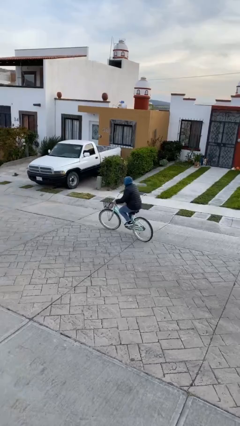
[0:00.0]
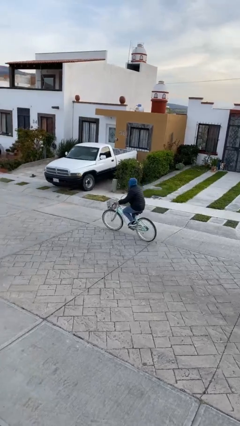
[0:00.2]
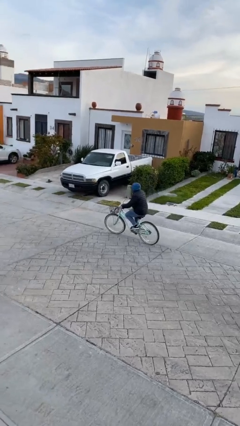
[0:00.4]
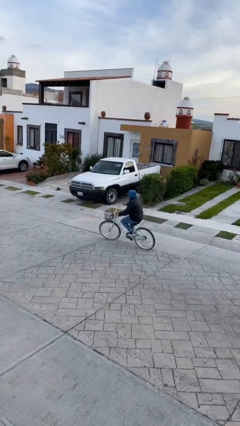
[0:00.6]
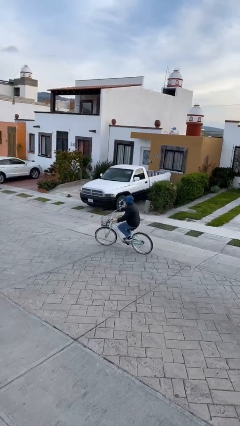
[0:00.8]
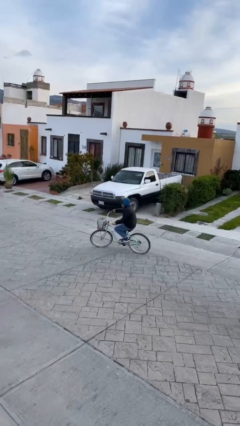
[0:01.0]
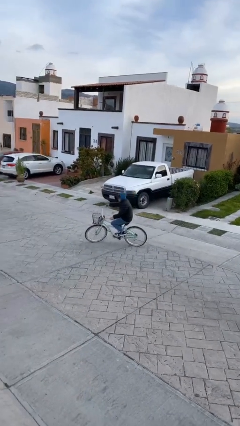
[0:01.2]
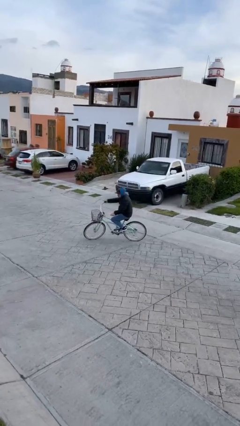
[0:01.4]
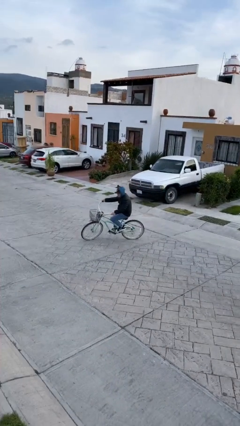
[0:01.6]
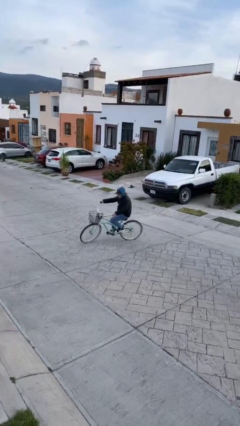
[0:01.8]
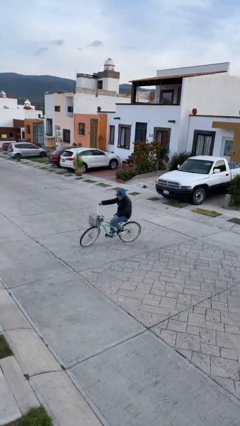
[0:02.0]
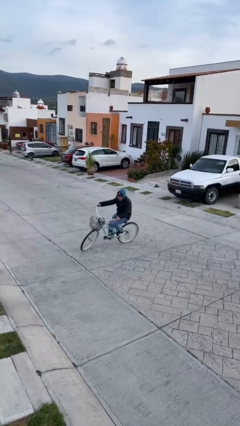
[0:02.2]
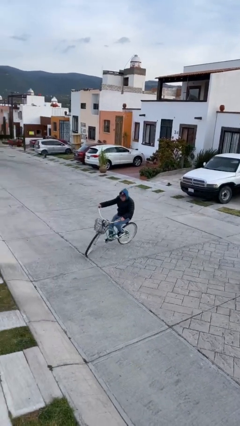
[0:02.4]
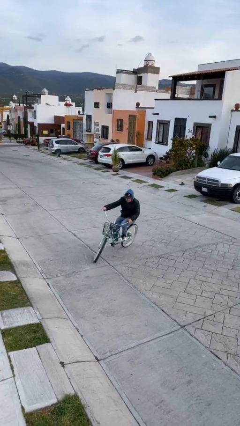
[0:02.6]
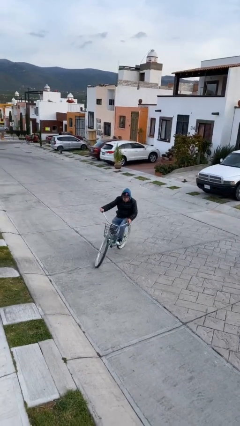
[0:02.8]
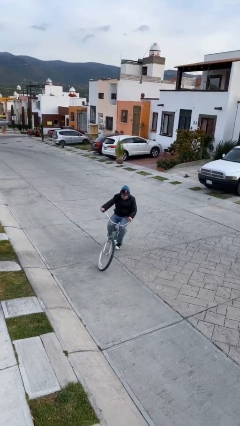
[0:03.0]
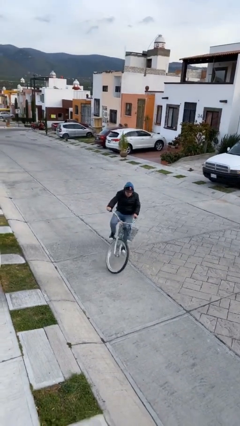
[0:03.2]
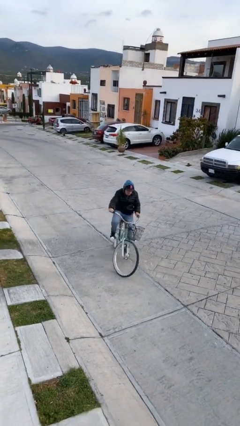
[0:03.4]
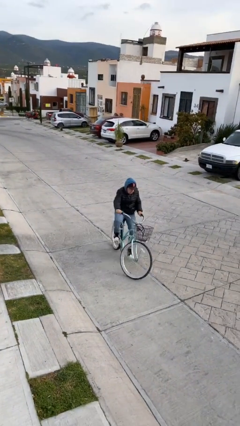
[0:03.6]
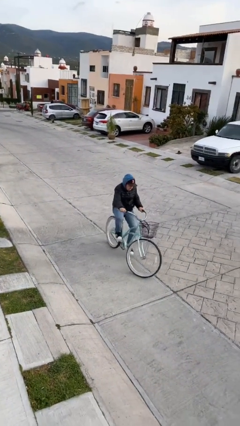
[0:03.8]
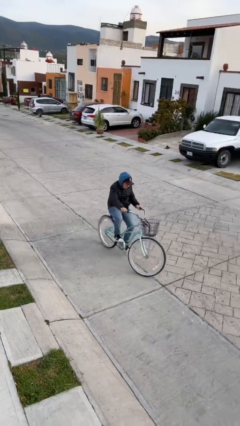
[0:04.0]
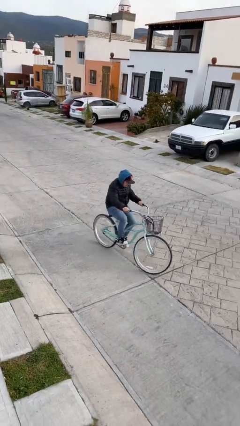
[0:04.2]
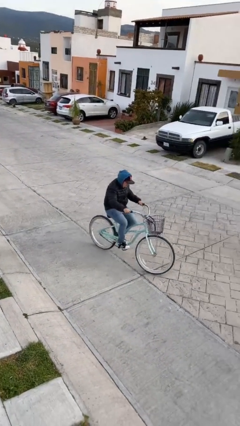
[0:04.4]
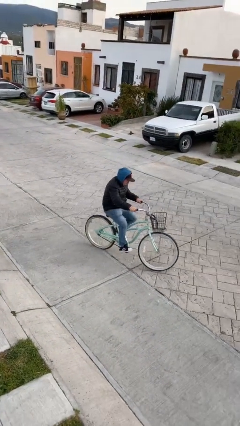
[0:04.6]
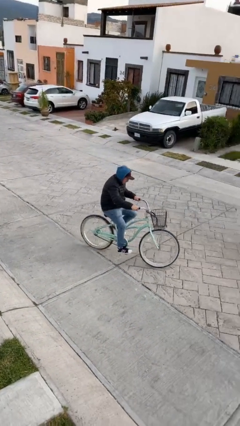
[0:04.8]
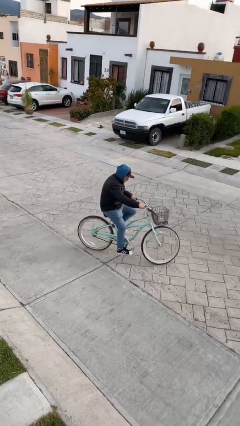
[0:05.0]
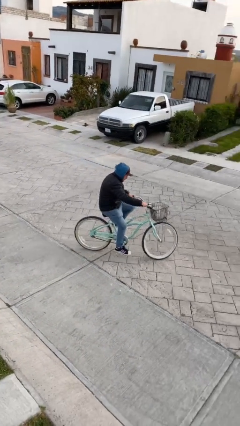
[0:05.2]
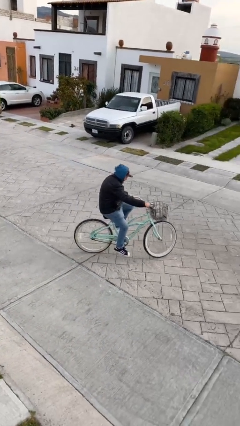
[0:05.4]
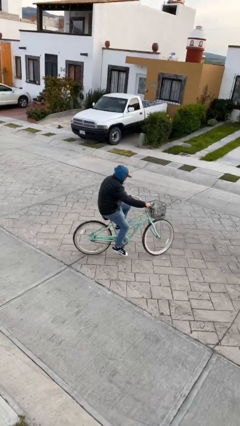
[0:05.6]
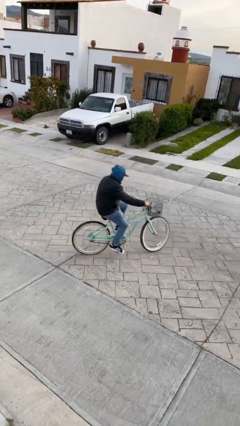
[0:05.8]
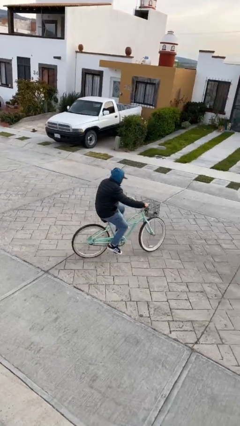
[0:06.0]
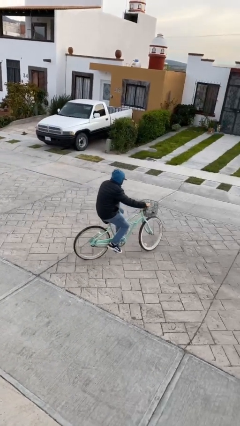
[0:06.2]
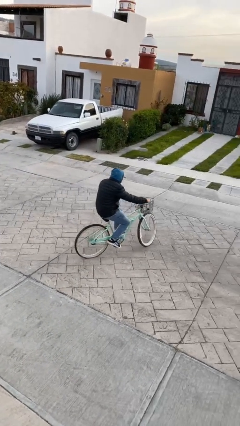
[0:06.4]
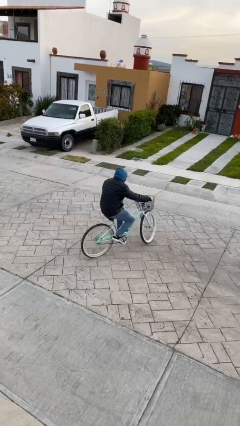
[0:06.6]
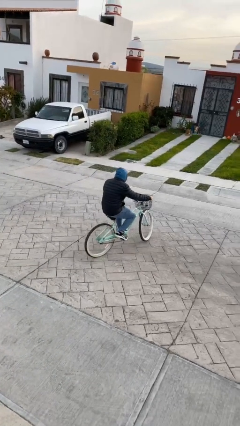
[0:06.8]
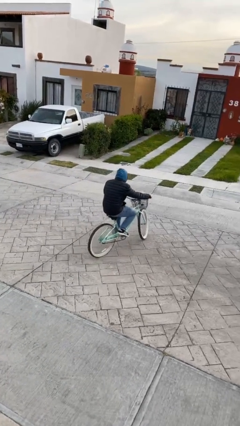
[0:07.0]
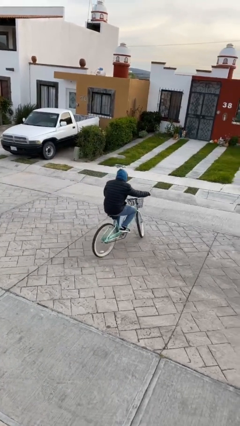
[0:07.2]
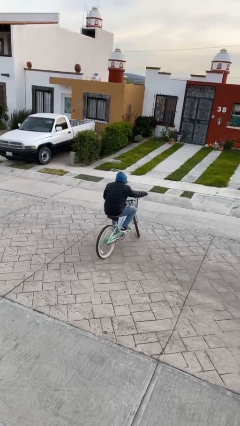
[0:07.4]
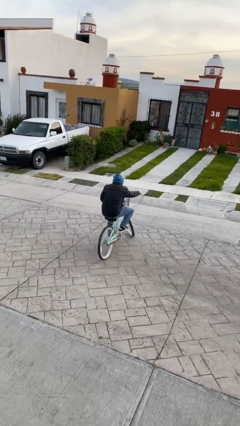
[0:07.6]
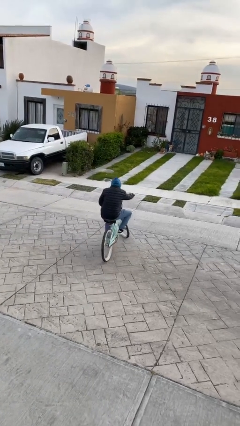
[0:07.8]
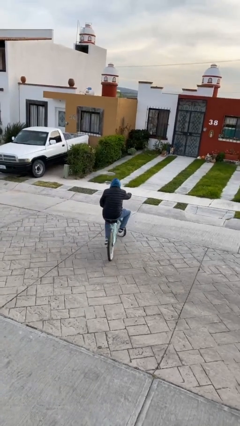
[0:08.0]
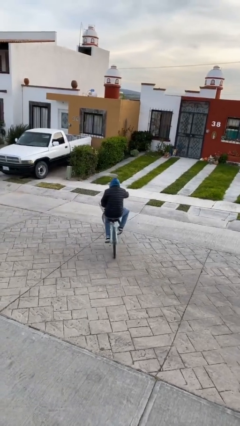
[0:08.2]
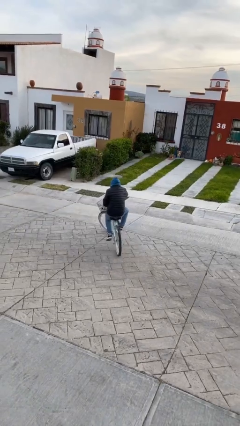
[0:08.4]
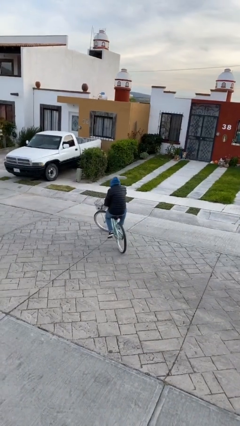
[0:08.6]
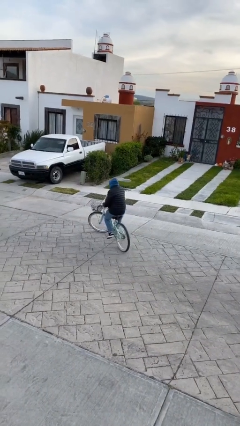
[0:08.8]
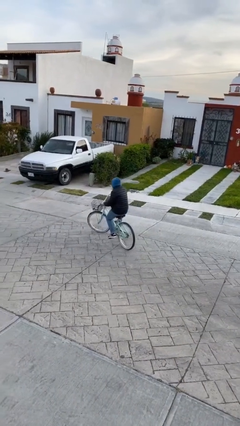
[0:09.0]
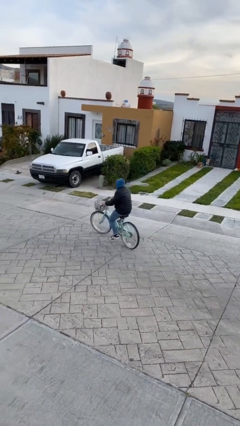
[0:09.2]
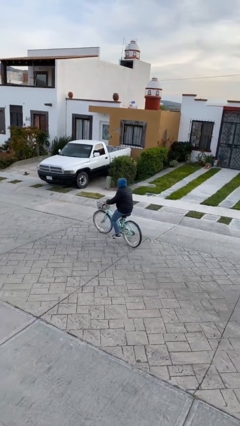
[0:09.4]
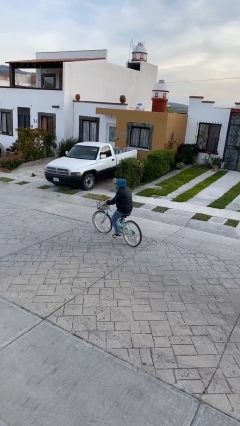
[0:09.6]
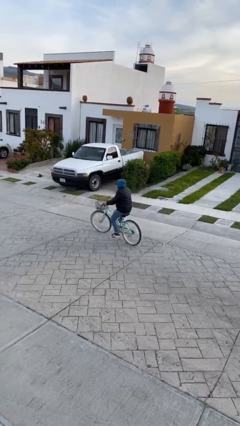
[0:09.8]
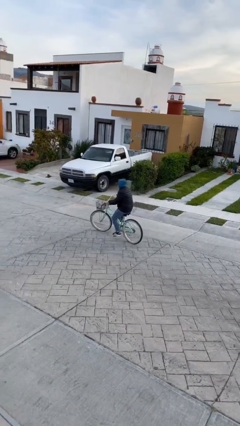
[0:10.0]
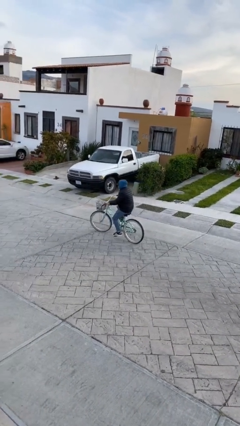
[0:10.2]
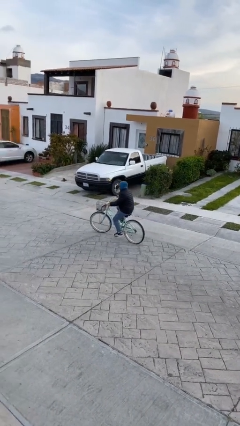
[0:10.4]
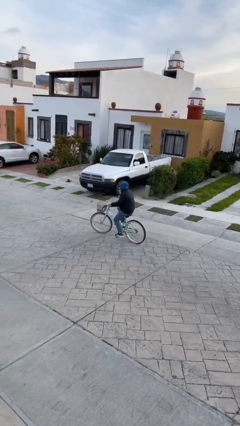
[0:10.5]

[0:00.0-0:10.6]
person rides bicycle

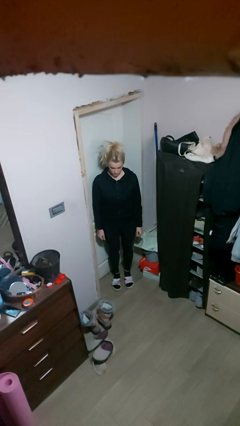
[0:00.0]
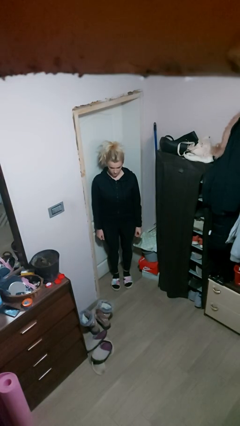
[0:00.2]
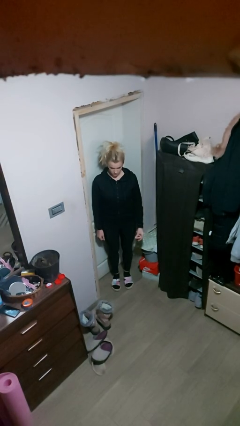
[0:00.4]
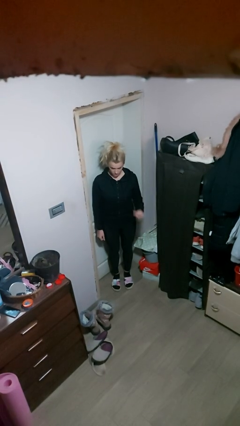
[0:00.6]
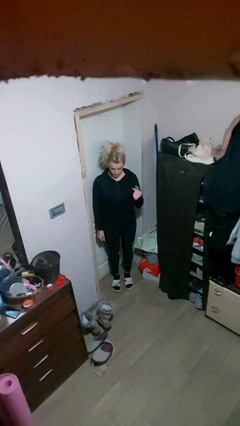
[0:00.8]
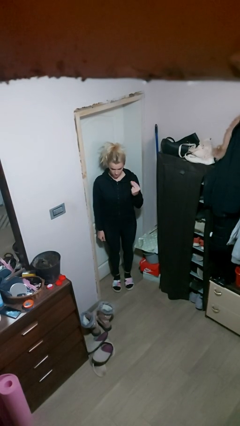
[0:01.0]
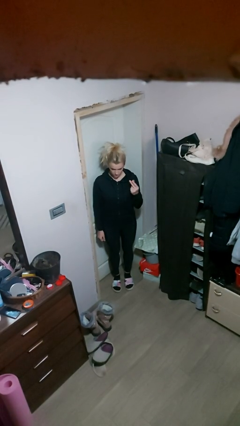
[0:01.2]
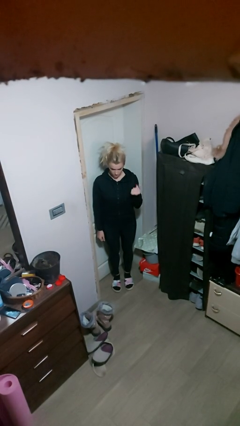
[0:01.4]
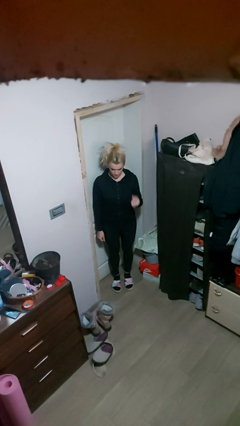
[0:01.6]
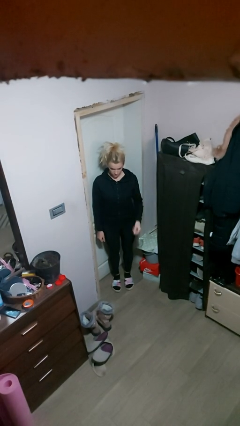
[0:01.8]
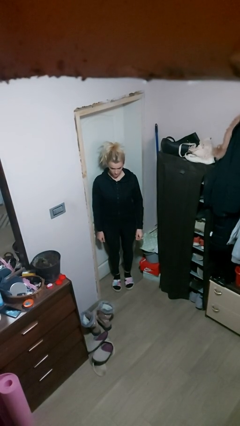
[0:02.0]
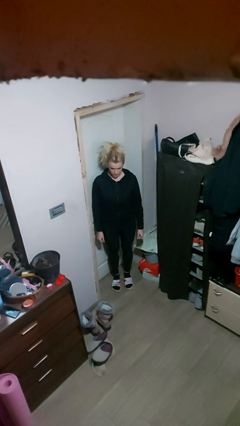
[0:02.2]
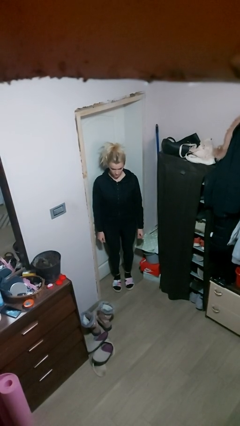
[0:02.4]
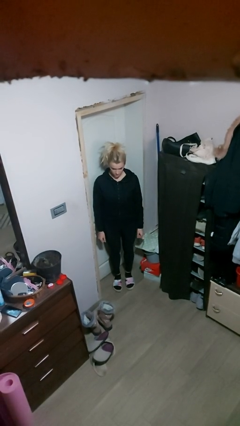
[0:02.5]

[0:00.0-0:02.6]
person snaps fingers

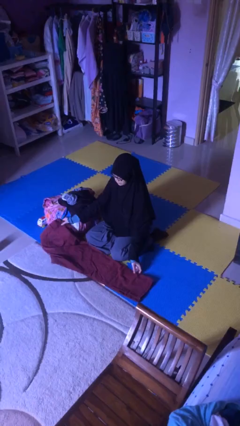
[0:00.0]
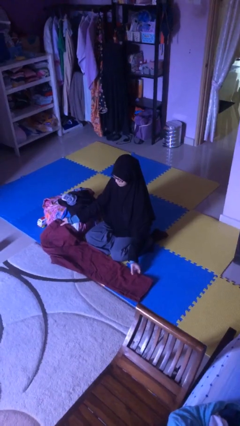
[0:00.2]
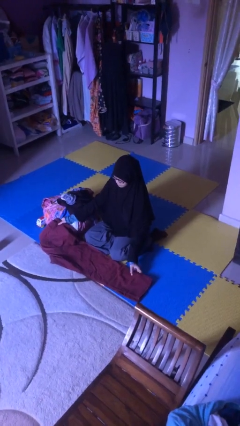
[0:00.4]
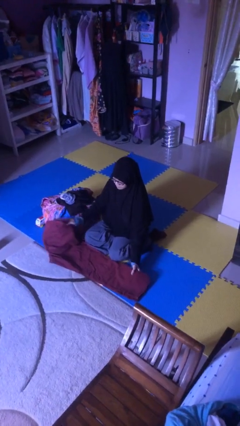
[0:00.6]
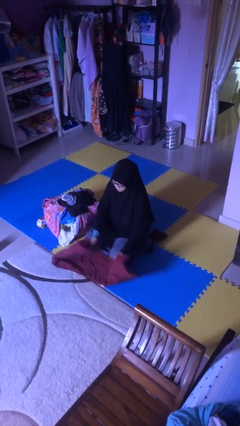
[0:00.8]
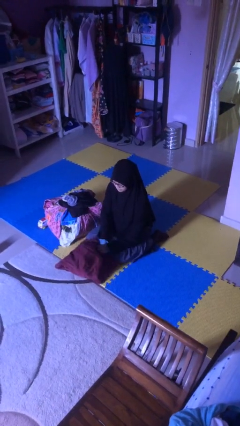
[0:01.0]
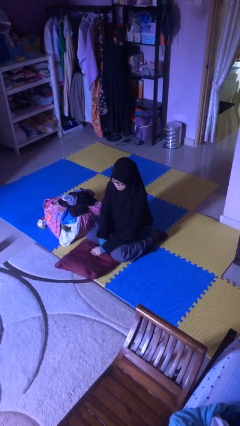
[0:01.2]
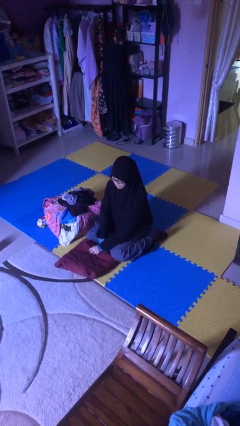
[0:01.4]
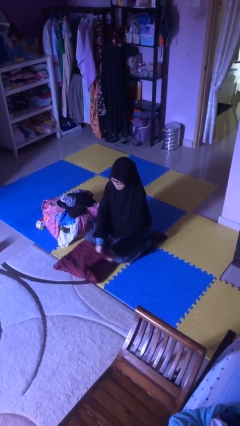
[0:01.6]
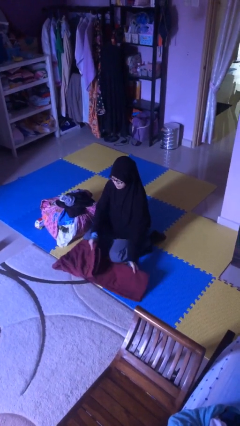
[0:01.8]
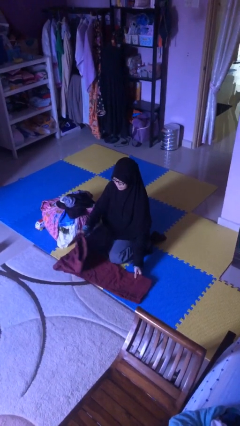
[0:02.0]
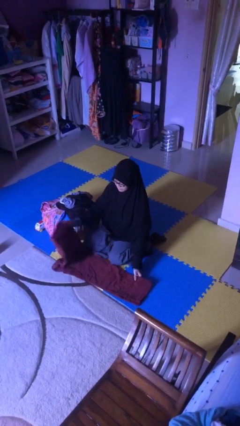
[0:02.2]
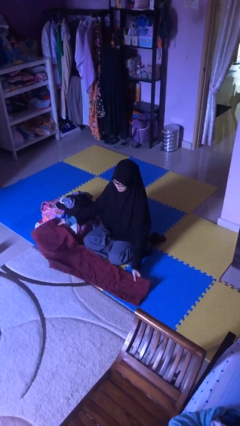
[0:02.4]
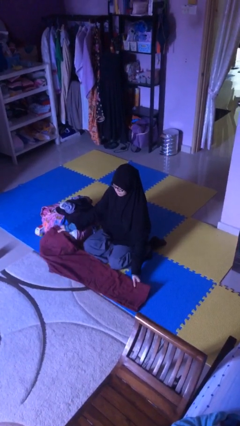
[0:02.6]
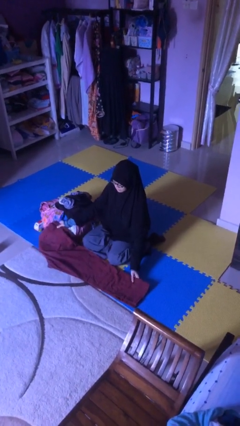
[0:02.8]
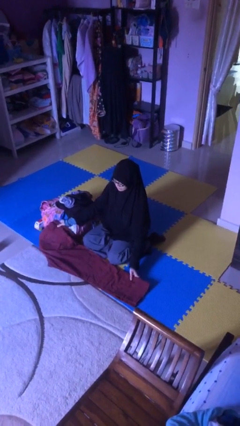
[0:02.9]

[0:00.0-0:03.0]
person folds pants

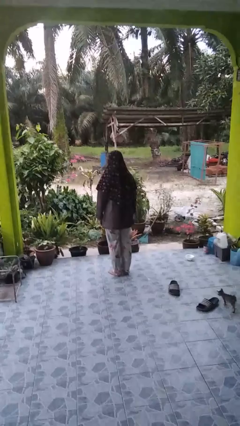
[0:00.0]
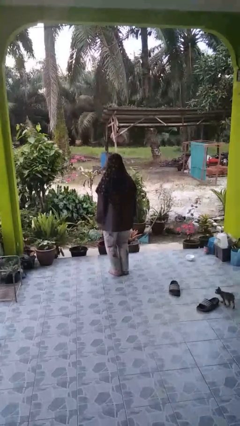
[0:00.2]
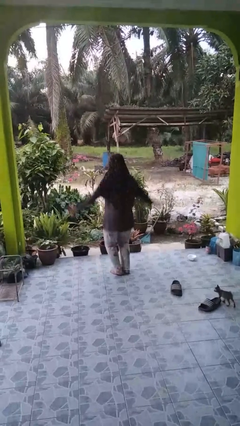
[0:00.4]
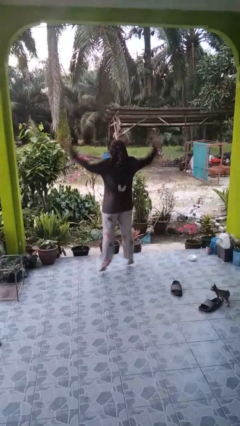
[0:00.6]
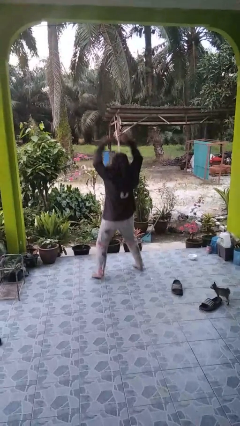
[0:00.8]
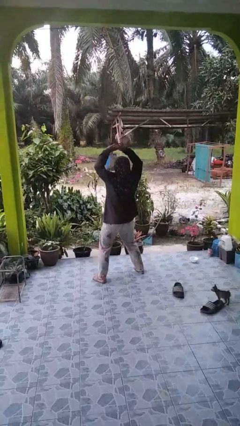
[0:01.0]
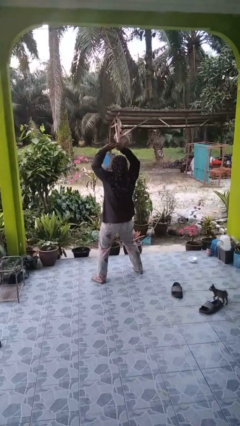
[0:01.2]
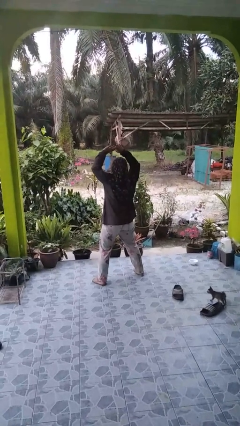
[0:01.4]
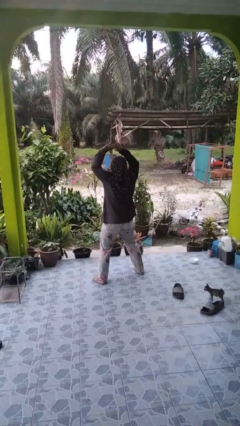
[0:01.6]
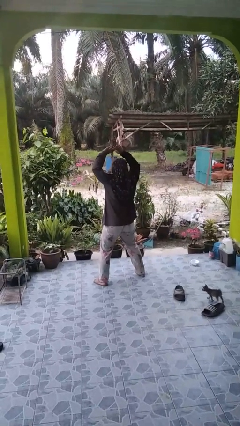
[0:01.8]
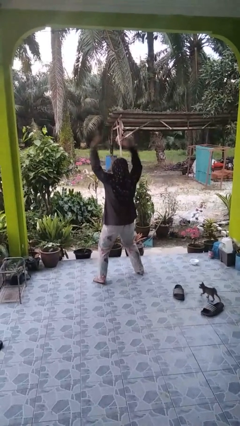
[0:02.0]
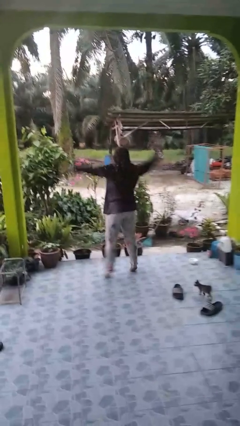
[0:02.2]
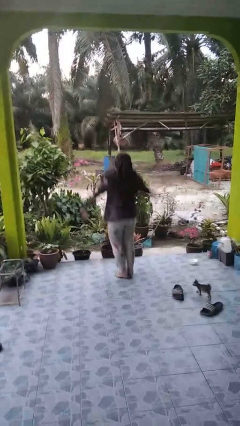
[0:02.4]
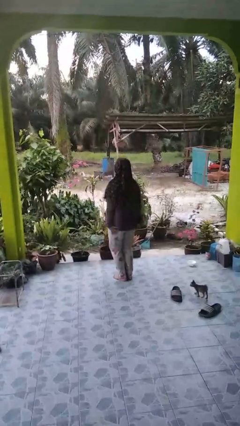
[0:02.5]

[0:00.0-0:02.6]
person exercises with jumping jacks
